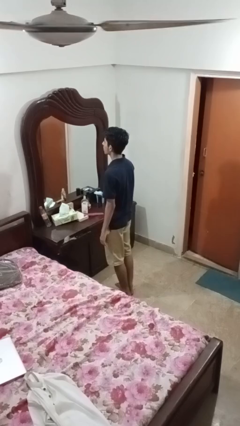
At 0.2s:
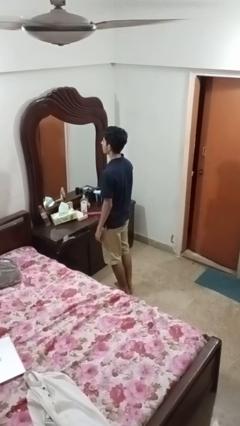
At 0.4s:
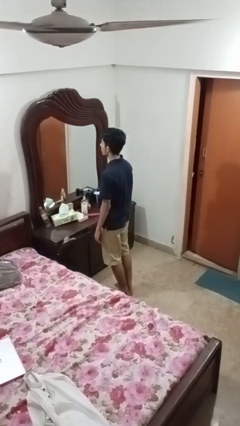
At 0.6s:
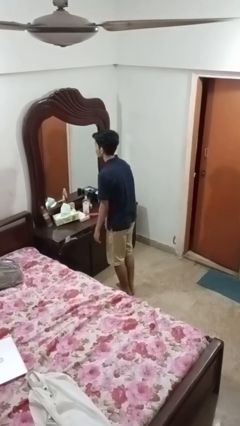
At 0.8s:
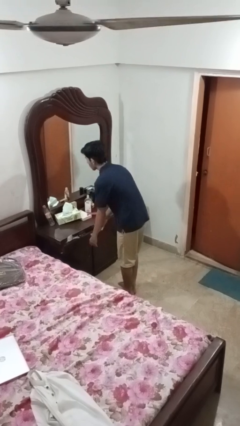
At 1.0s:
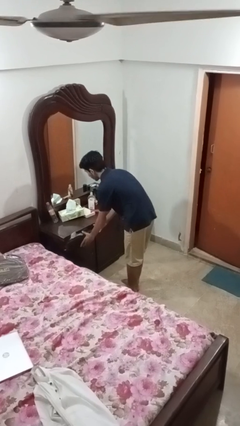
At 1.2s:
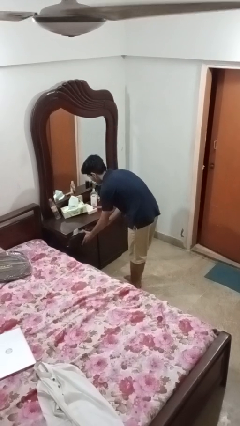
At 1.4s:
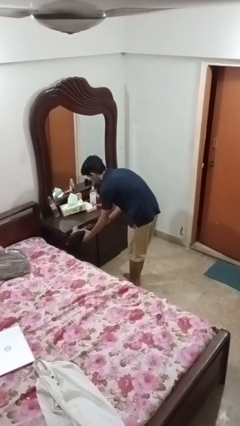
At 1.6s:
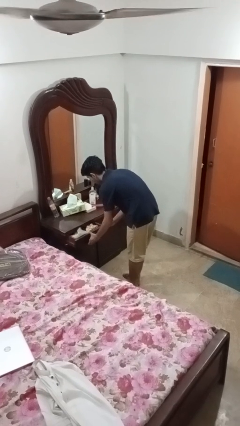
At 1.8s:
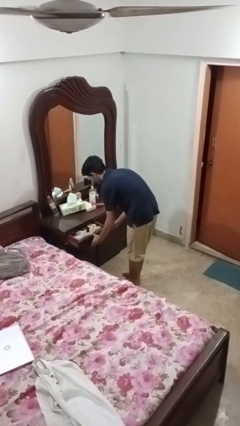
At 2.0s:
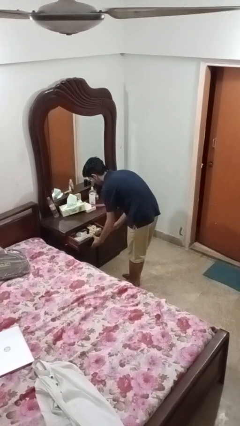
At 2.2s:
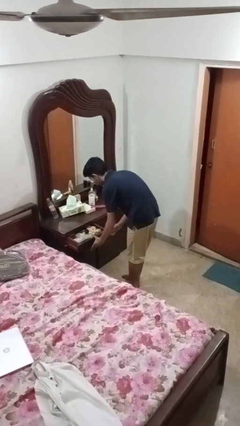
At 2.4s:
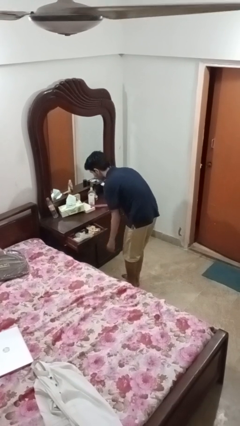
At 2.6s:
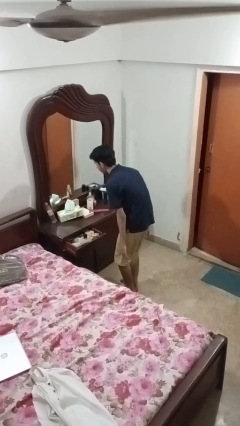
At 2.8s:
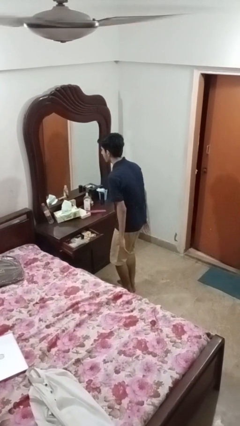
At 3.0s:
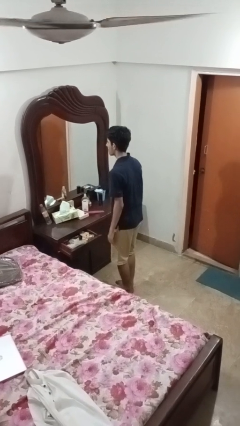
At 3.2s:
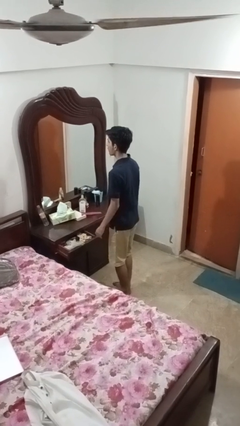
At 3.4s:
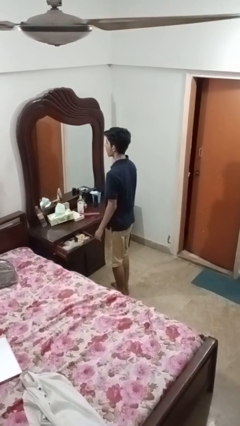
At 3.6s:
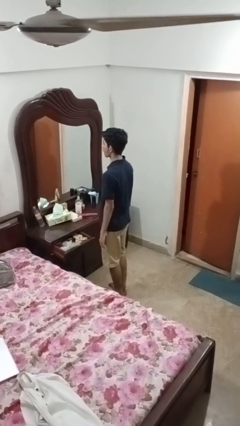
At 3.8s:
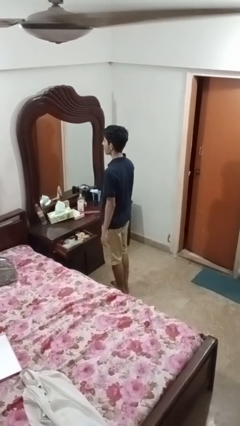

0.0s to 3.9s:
person opens dresser drawer

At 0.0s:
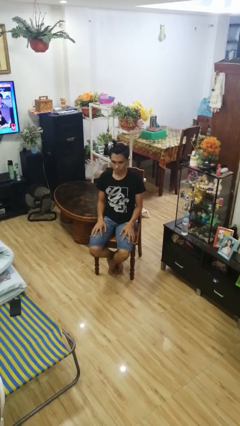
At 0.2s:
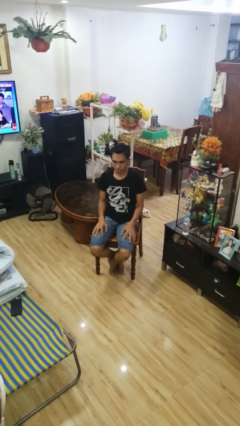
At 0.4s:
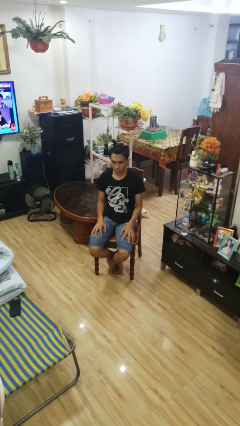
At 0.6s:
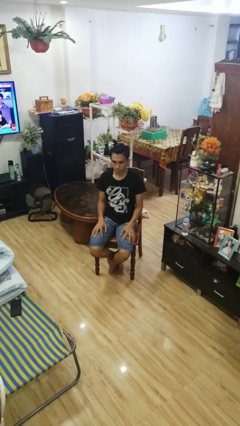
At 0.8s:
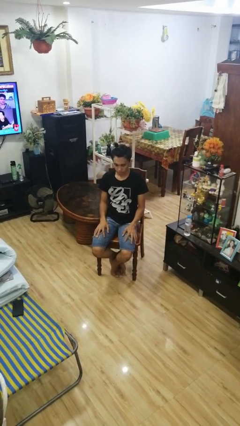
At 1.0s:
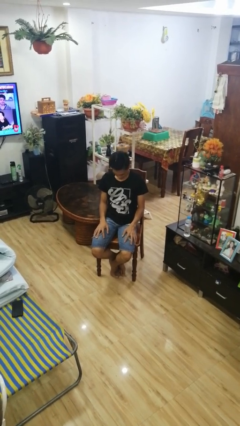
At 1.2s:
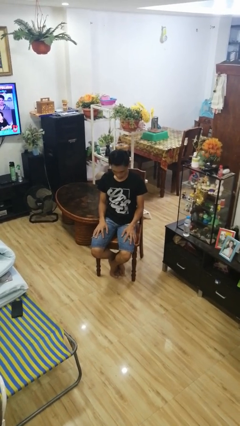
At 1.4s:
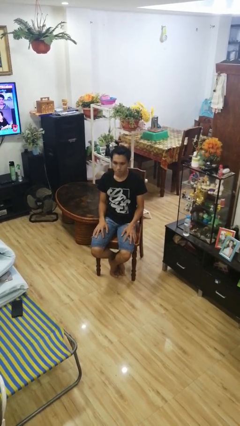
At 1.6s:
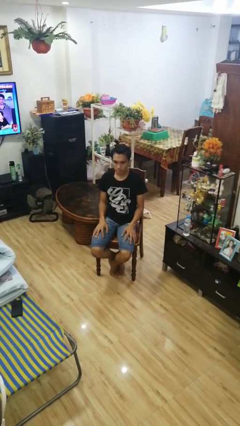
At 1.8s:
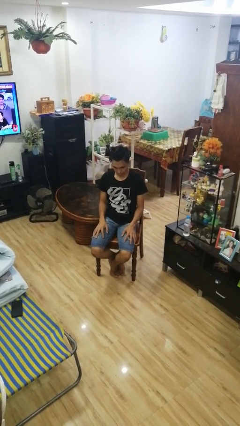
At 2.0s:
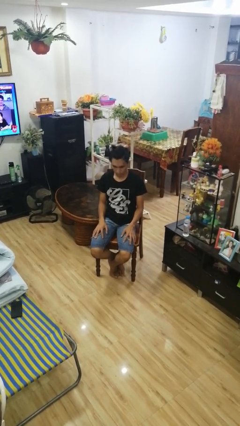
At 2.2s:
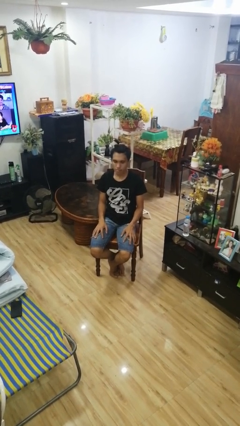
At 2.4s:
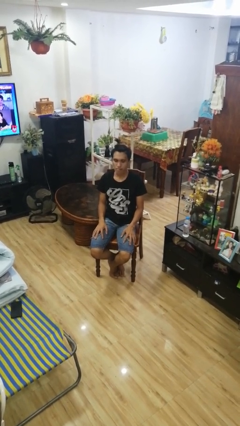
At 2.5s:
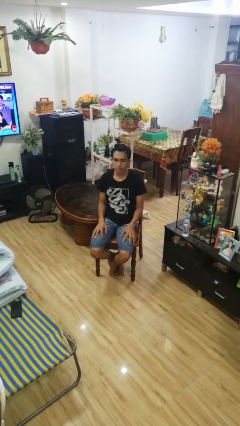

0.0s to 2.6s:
person nods head

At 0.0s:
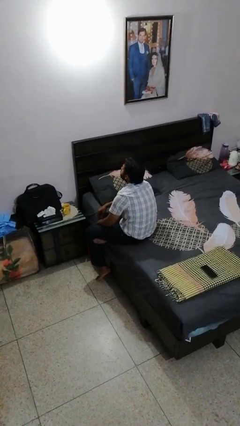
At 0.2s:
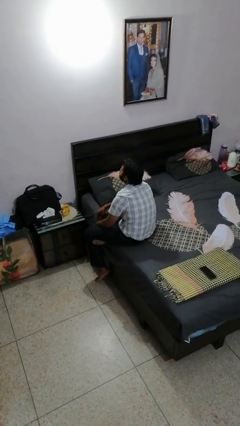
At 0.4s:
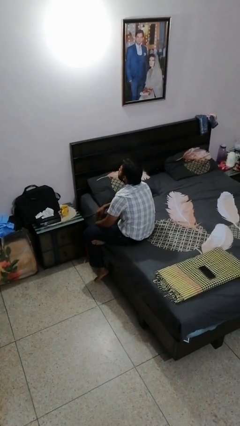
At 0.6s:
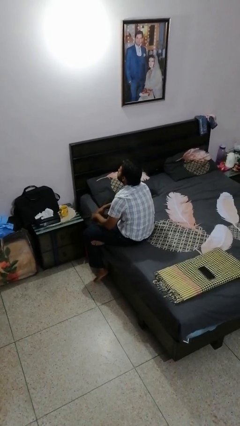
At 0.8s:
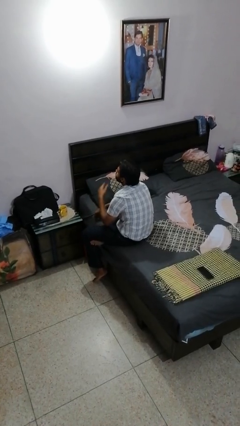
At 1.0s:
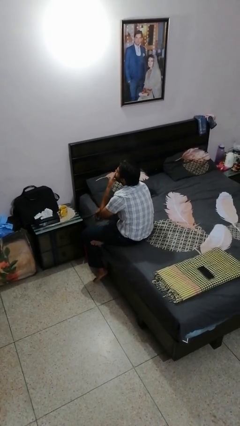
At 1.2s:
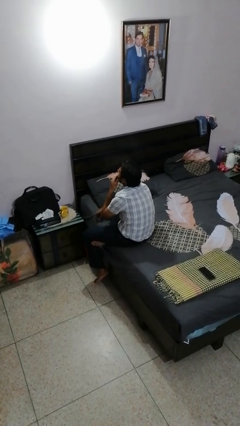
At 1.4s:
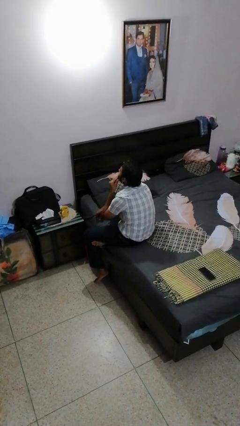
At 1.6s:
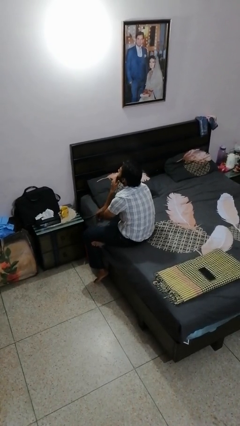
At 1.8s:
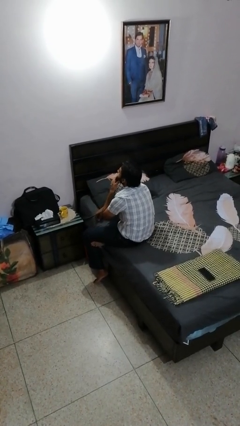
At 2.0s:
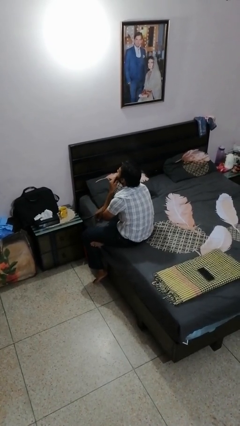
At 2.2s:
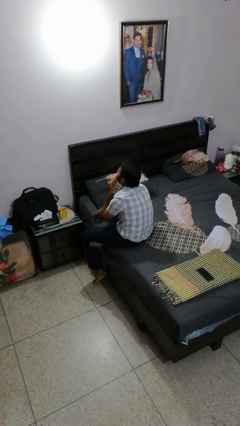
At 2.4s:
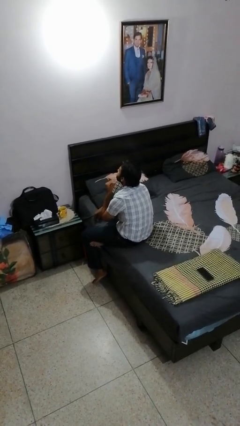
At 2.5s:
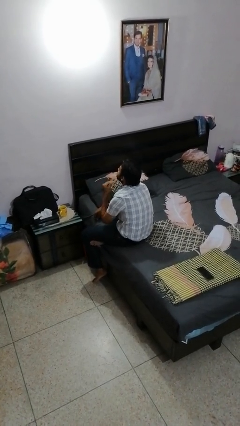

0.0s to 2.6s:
person strokes chin

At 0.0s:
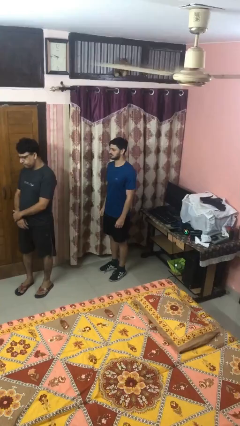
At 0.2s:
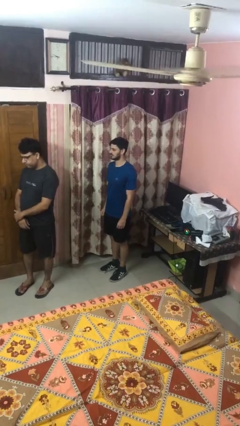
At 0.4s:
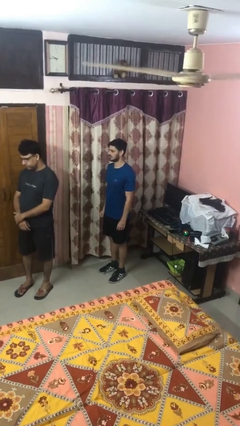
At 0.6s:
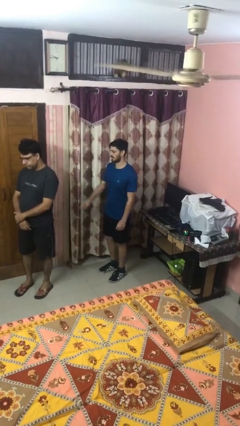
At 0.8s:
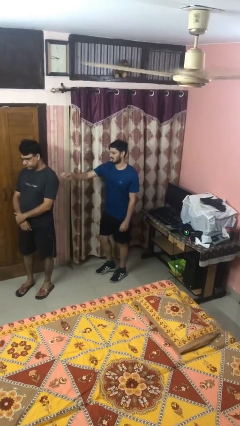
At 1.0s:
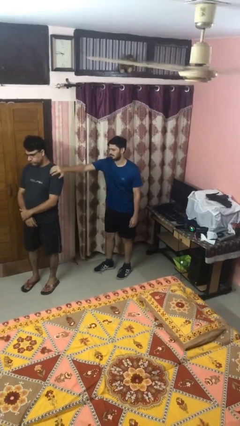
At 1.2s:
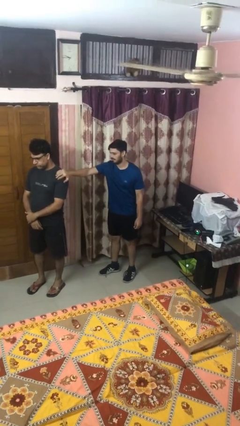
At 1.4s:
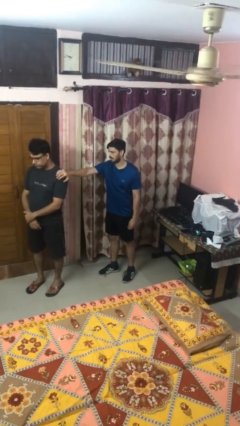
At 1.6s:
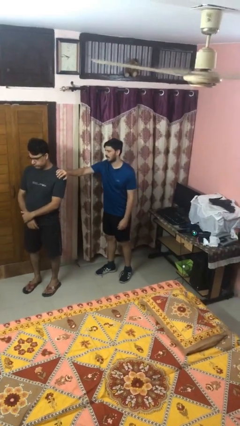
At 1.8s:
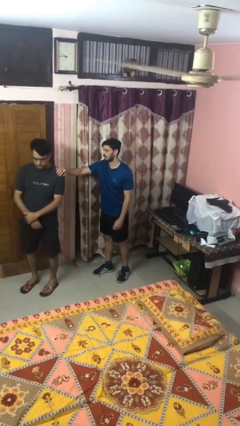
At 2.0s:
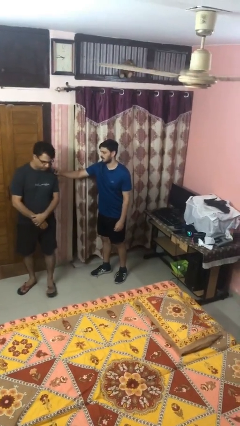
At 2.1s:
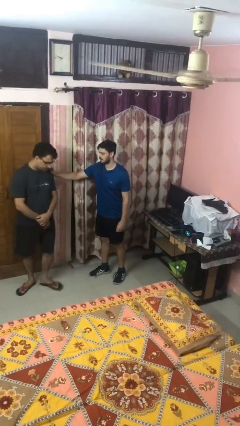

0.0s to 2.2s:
person grabs person by shoulder

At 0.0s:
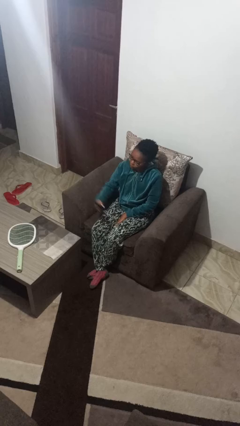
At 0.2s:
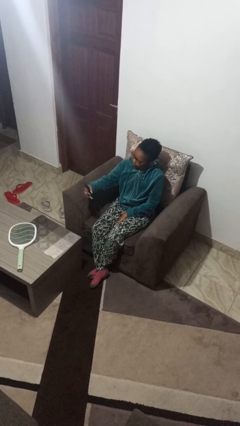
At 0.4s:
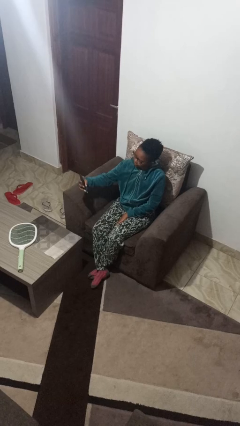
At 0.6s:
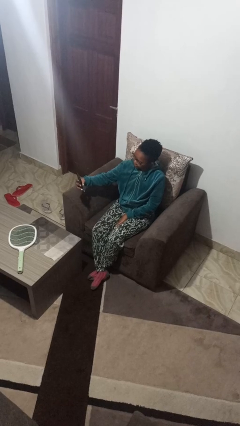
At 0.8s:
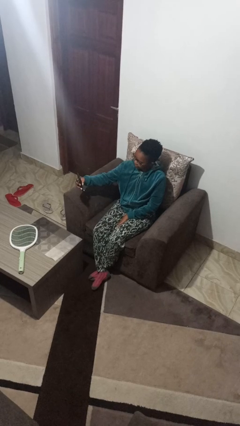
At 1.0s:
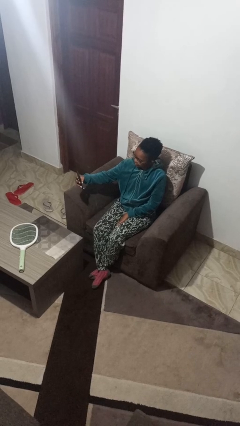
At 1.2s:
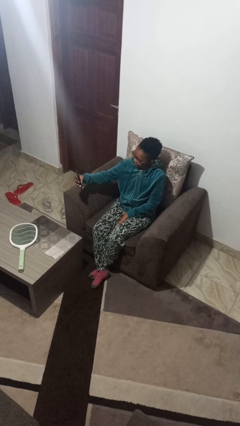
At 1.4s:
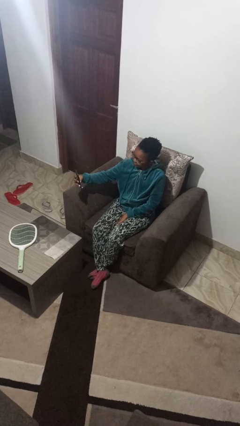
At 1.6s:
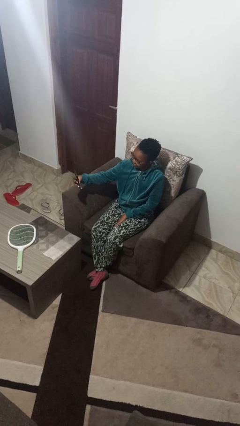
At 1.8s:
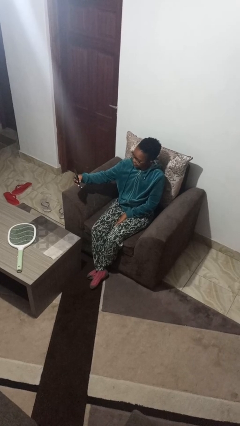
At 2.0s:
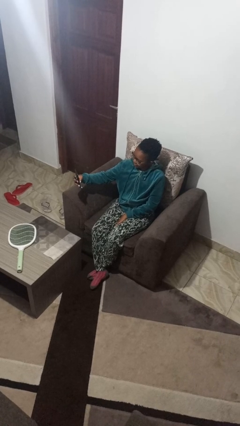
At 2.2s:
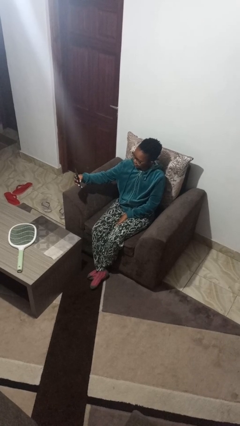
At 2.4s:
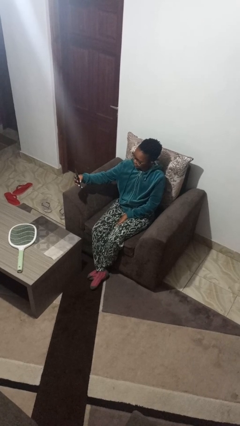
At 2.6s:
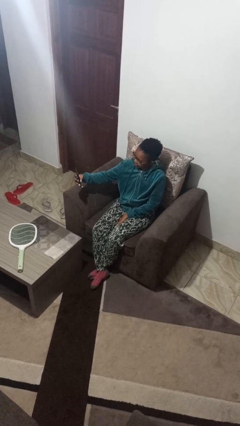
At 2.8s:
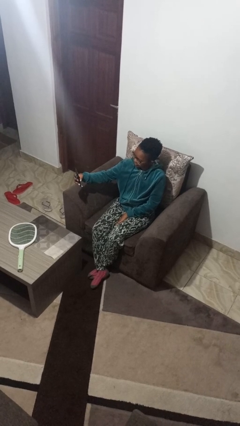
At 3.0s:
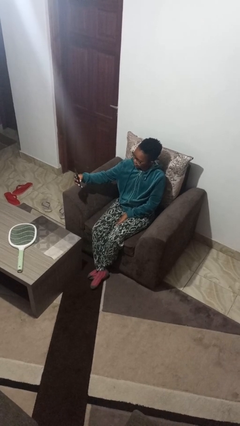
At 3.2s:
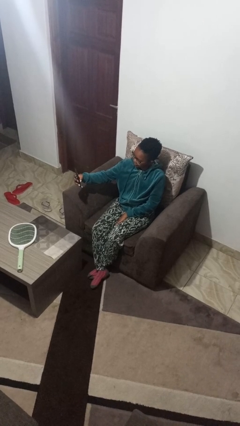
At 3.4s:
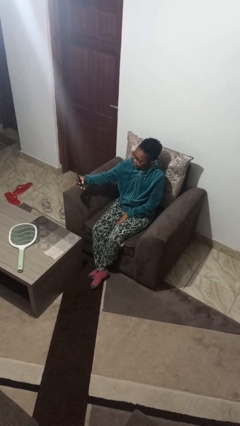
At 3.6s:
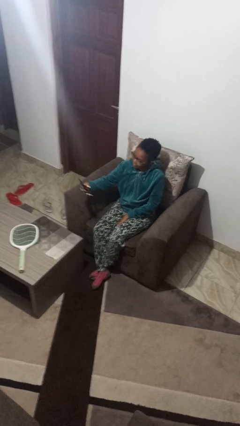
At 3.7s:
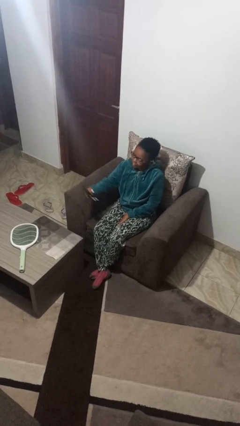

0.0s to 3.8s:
person takes selfie

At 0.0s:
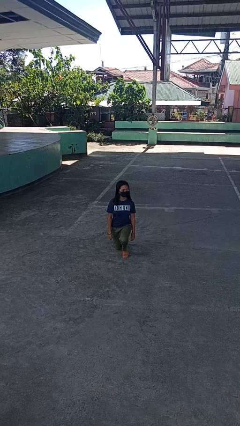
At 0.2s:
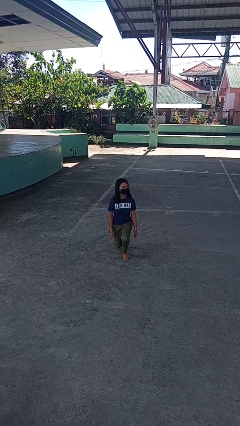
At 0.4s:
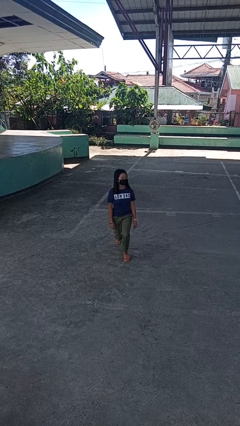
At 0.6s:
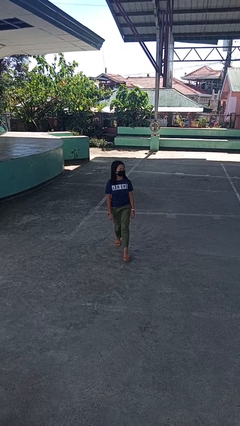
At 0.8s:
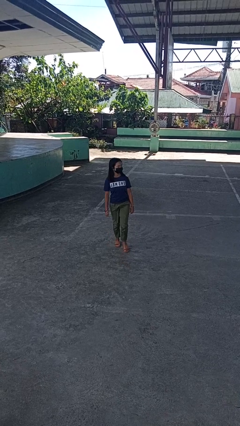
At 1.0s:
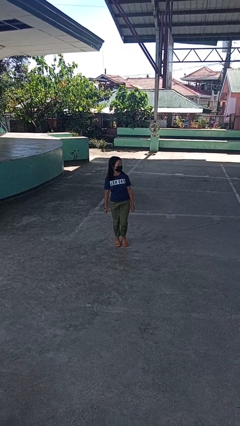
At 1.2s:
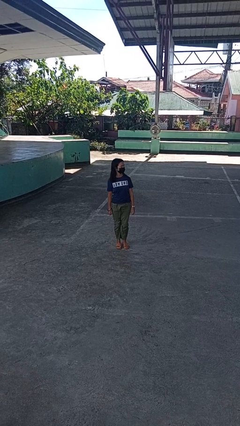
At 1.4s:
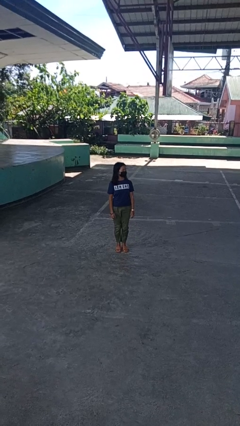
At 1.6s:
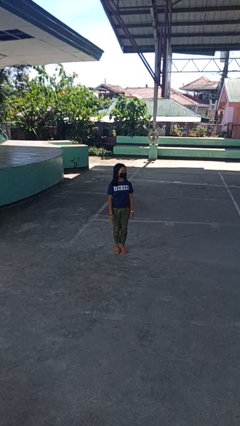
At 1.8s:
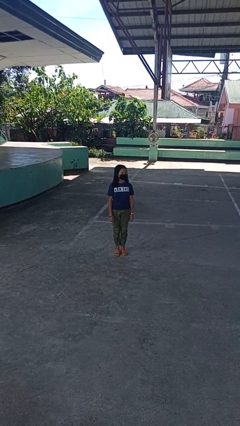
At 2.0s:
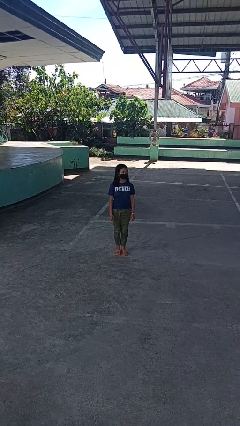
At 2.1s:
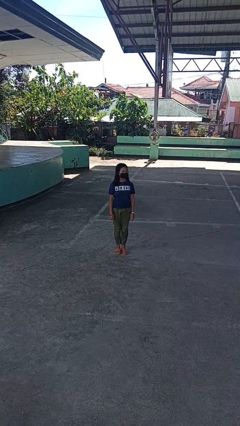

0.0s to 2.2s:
person stands up from floor

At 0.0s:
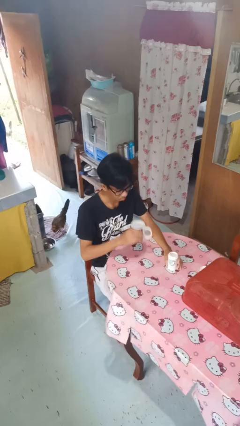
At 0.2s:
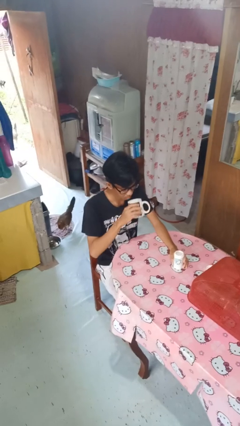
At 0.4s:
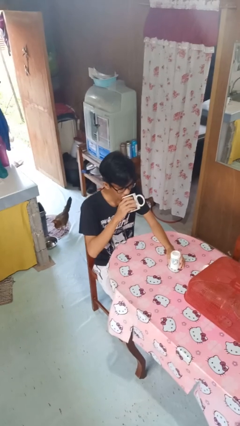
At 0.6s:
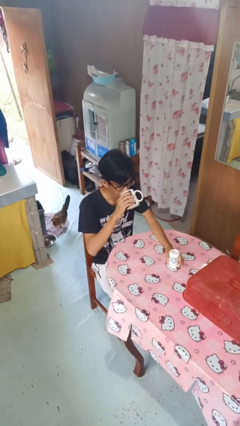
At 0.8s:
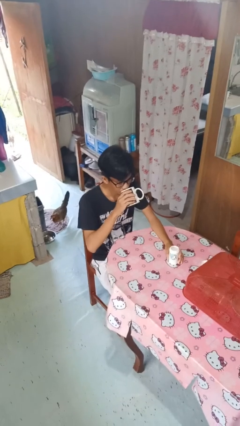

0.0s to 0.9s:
person drinks from cup
